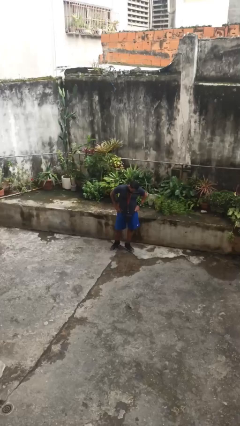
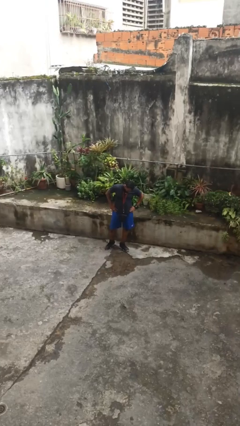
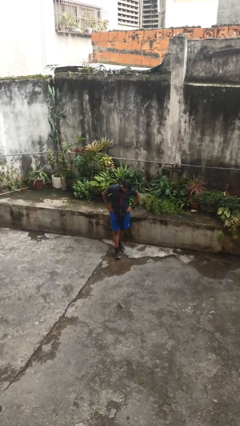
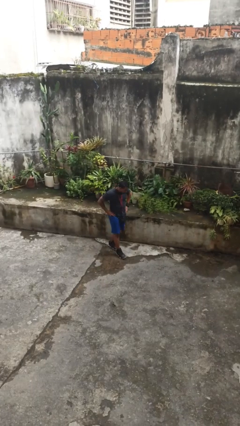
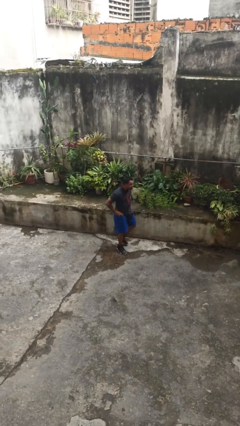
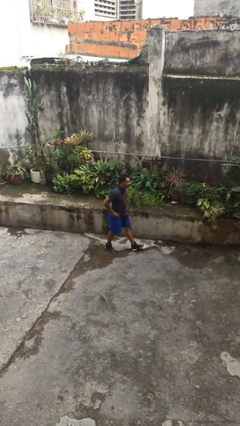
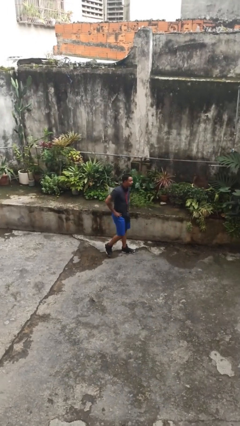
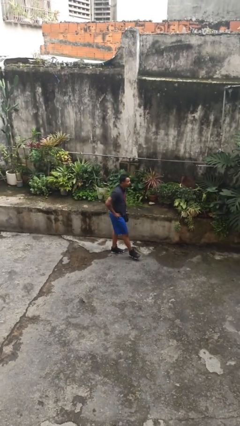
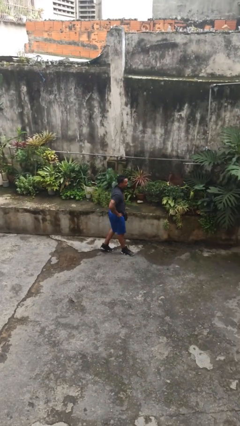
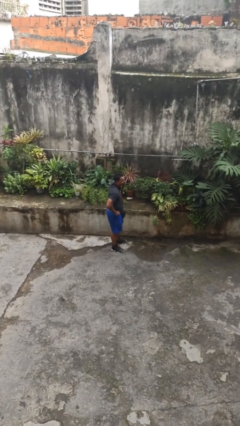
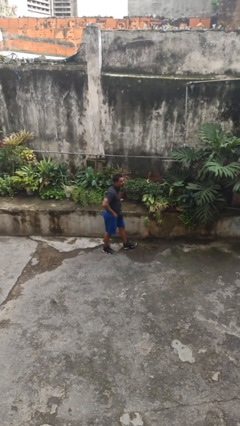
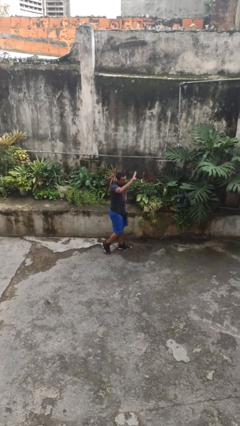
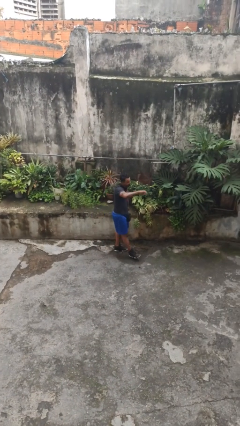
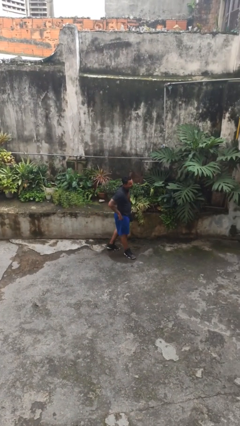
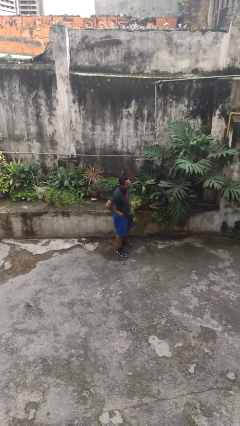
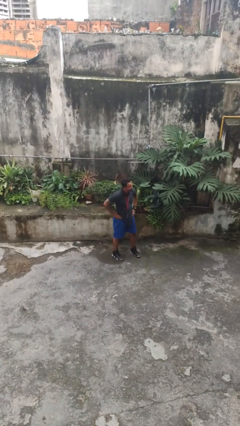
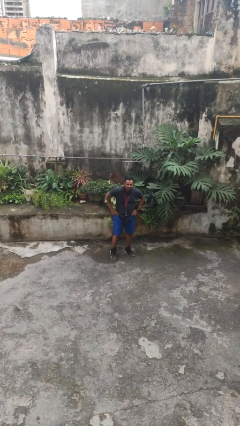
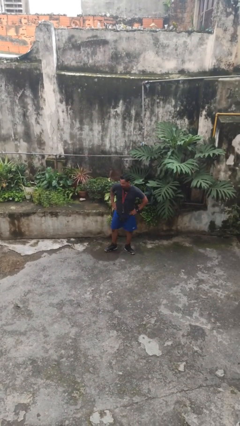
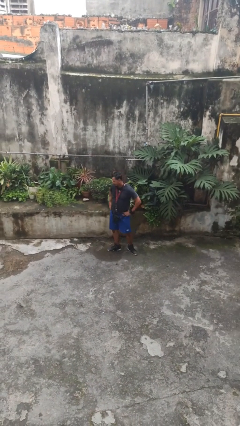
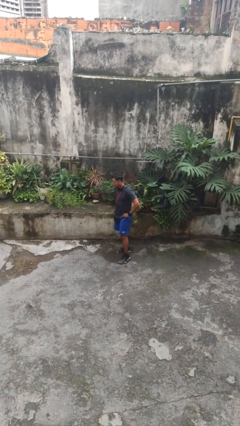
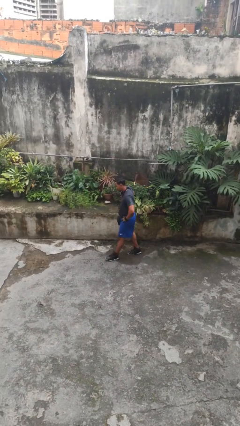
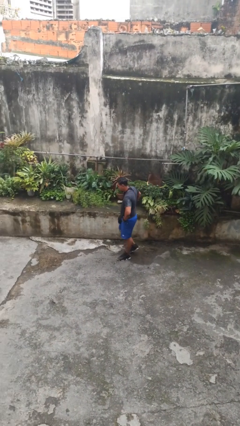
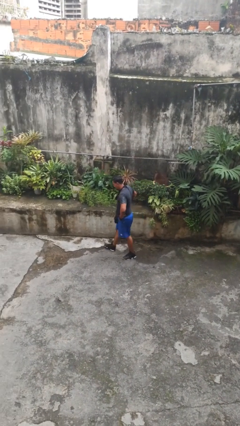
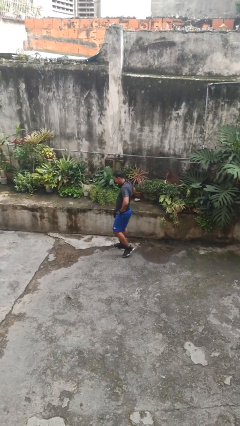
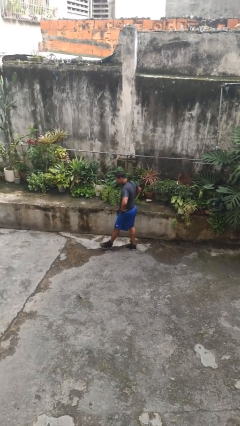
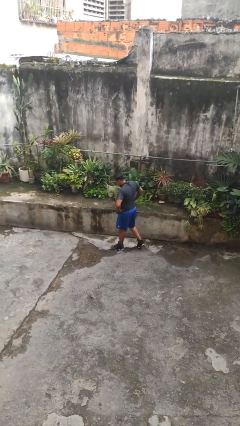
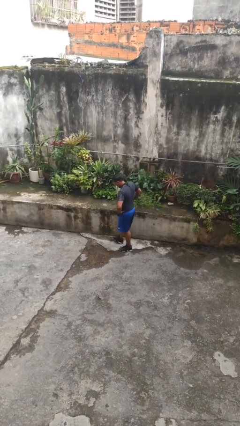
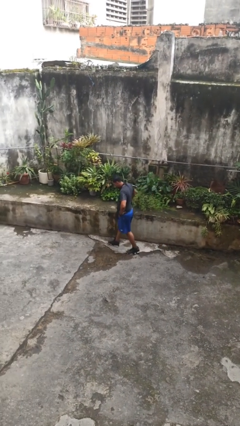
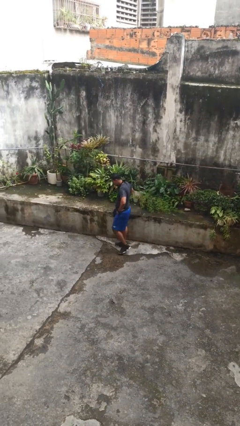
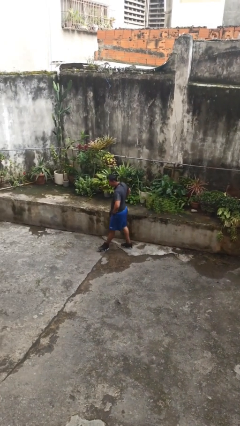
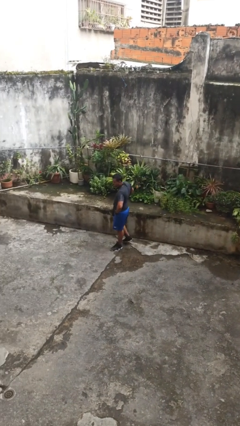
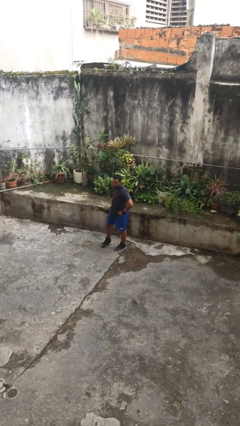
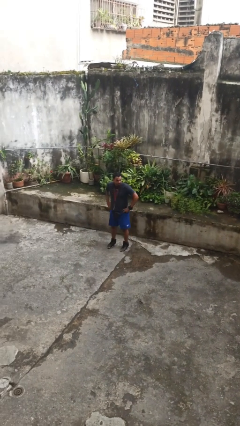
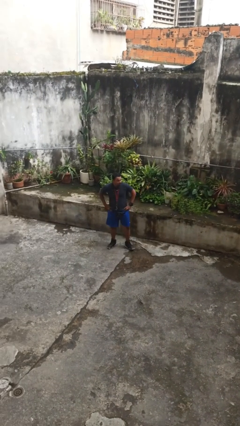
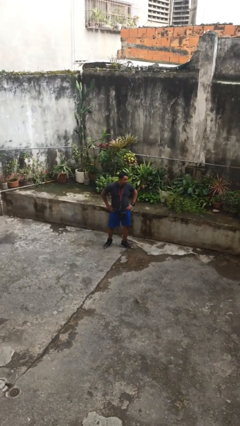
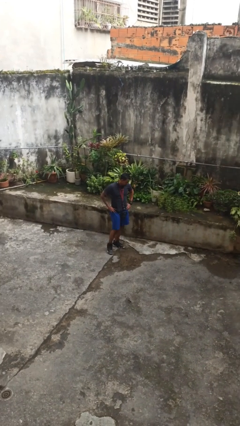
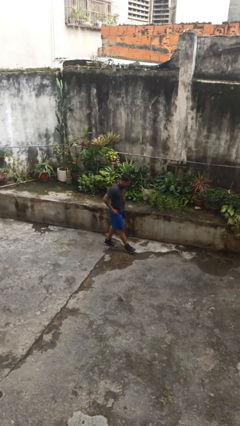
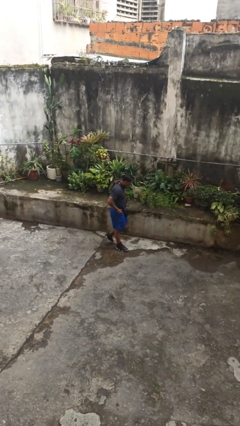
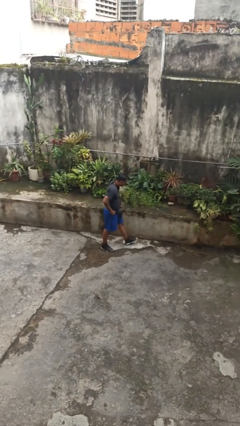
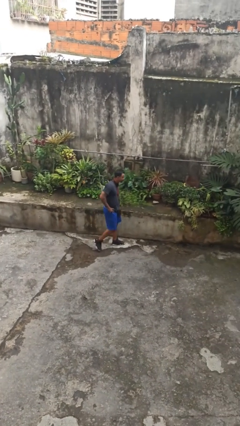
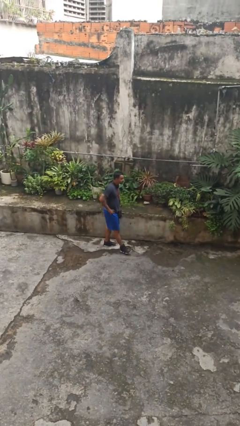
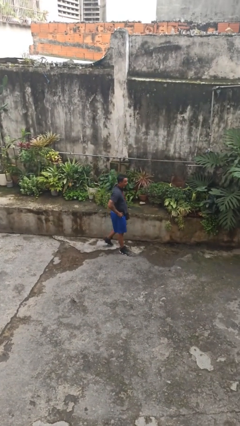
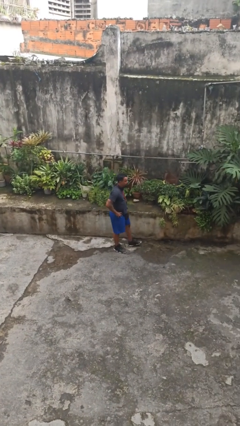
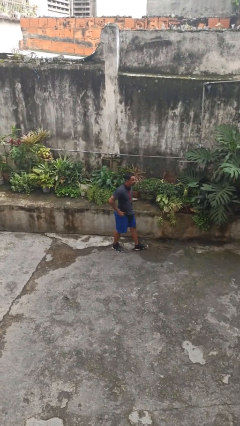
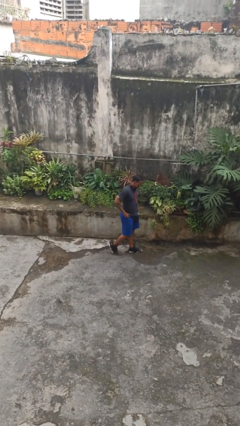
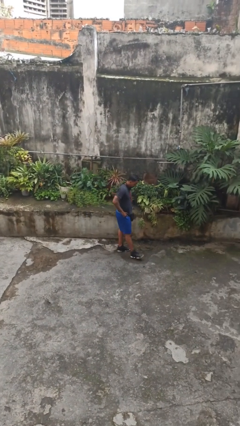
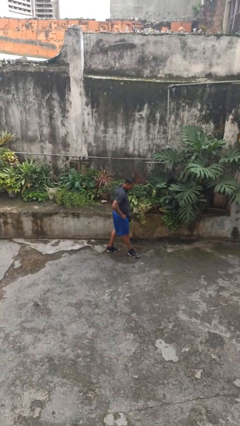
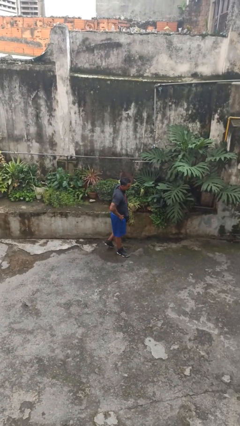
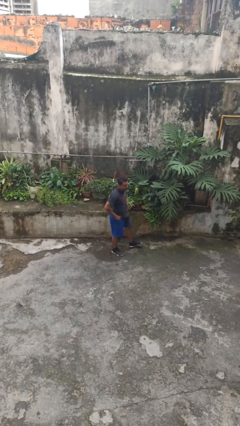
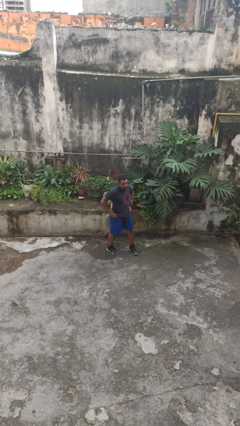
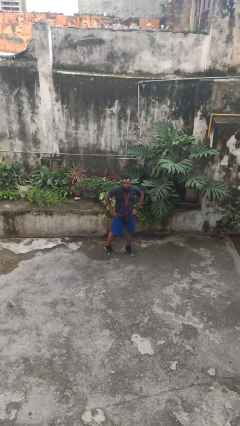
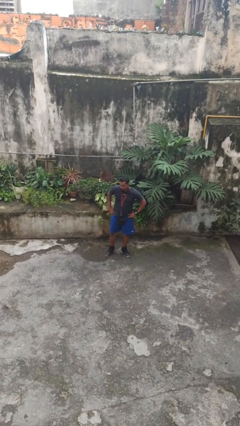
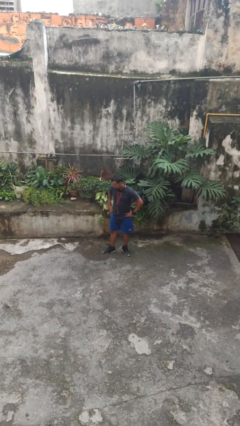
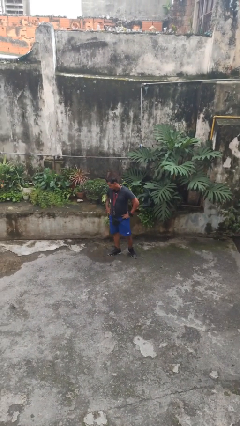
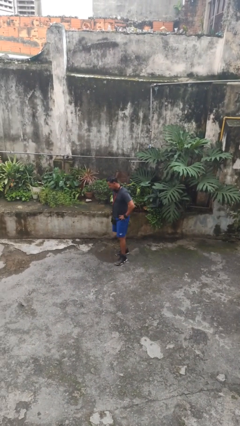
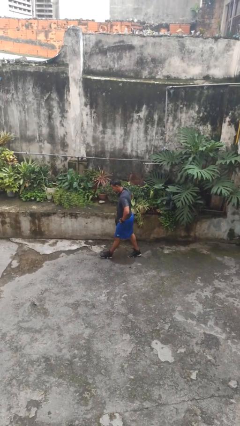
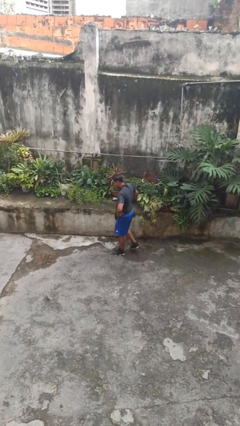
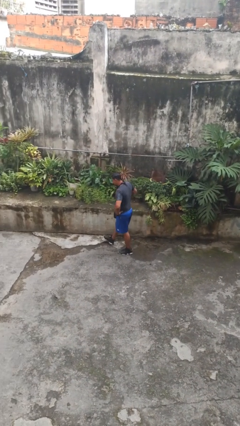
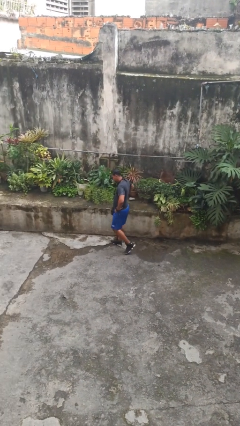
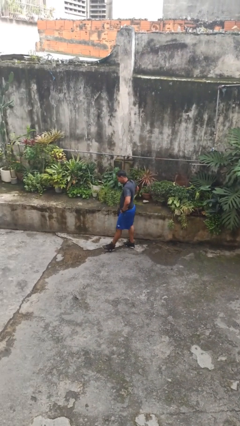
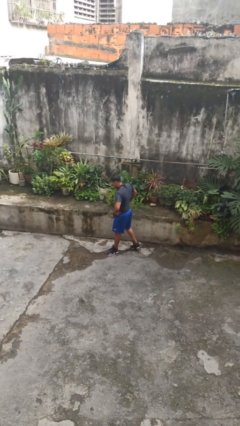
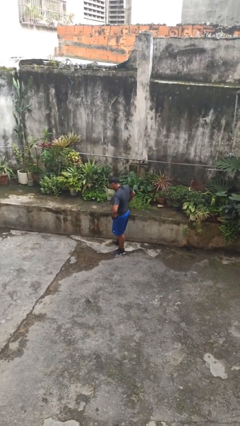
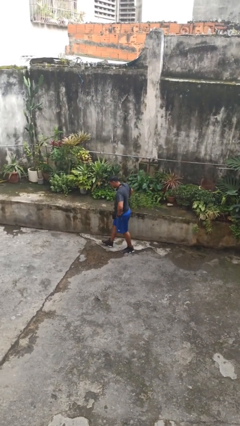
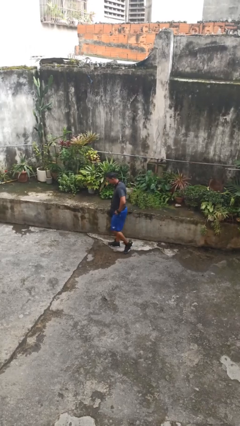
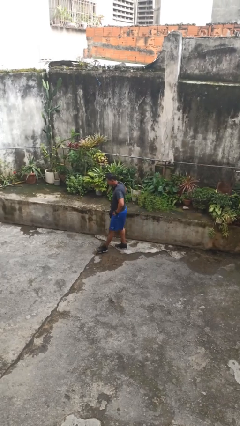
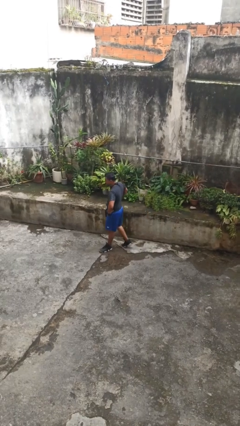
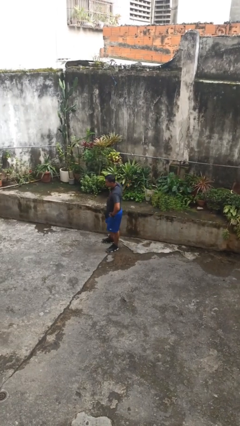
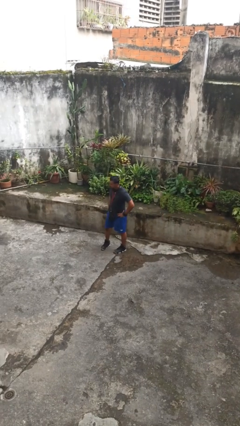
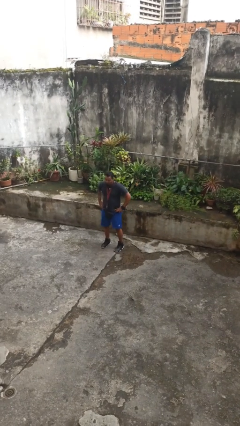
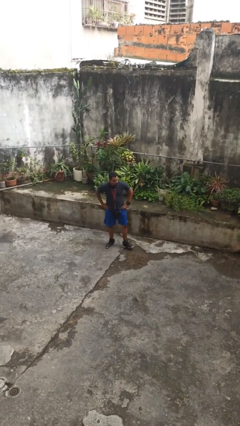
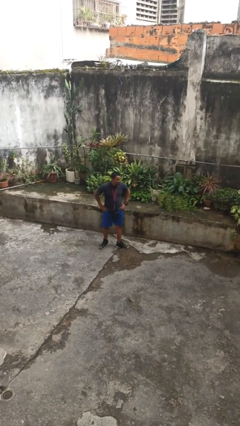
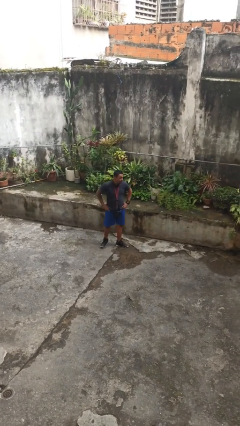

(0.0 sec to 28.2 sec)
person walks

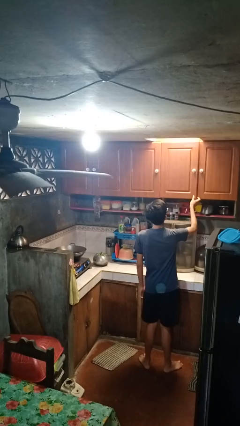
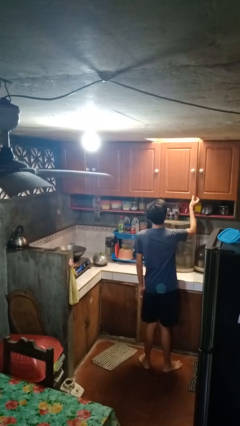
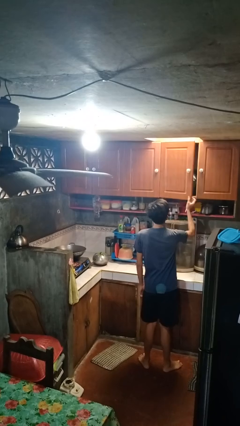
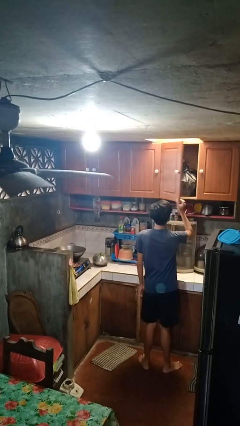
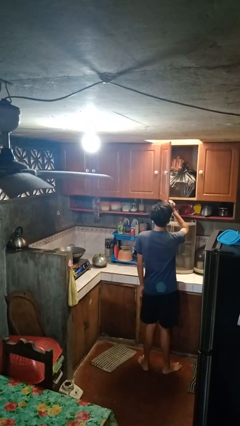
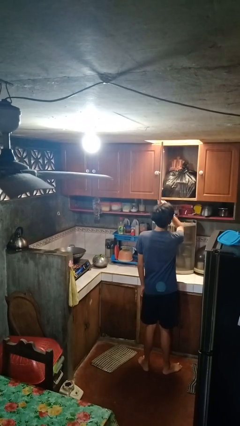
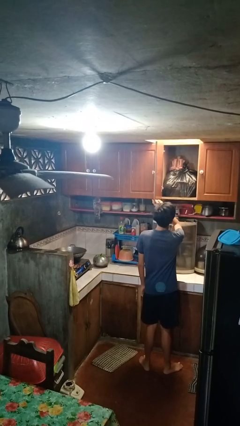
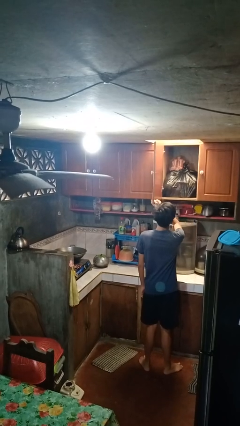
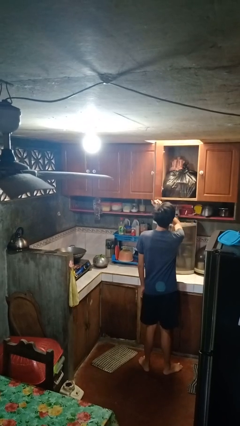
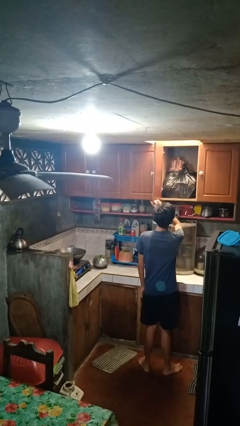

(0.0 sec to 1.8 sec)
person opens cabinet

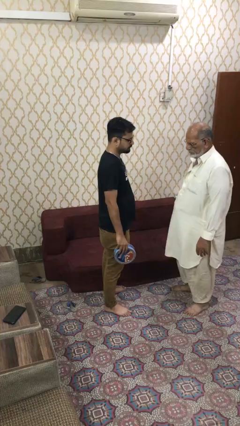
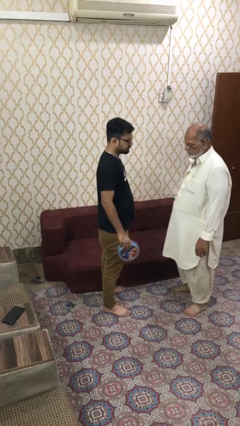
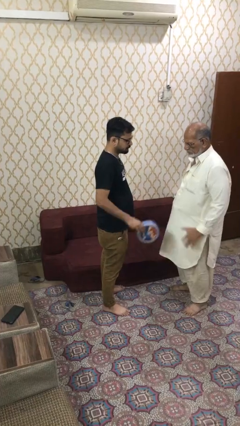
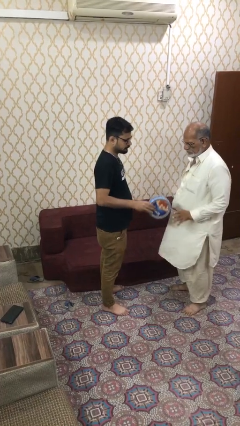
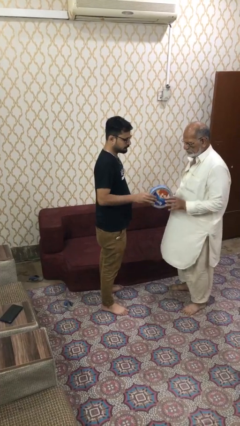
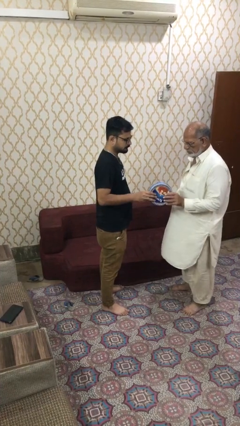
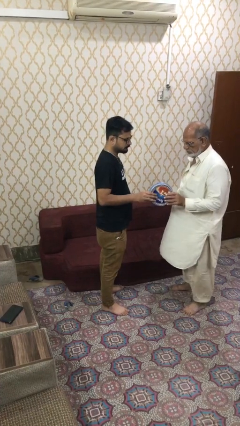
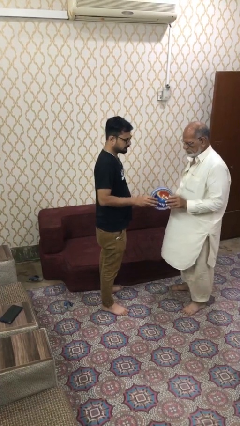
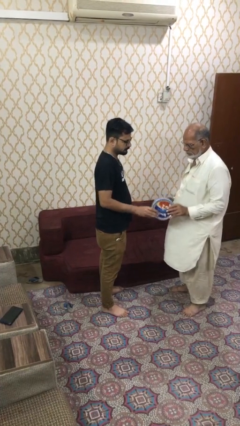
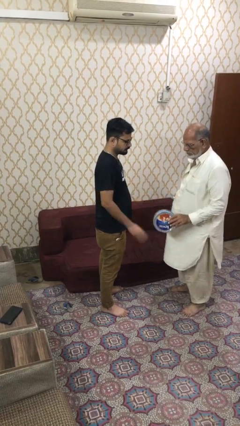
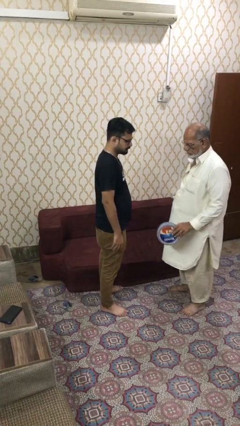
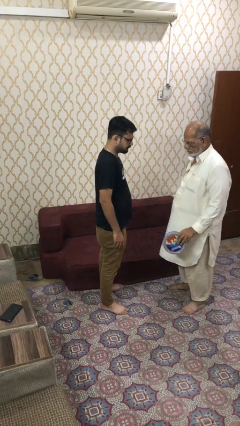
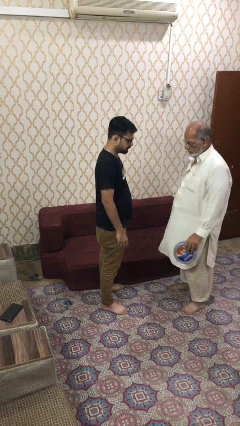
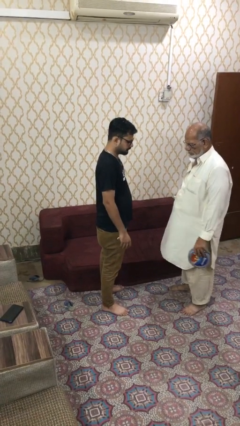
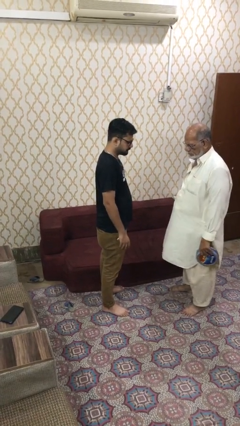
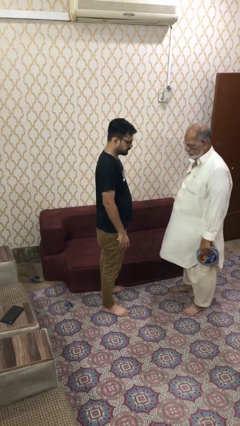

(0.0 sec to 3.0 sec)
person transfers object to person
